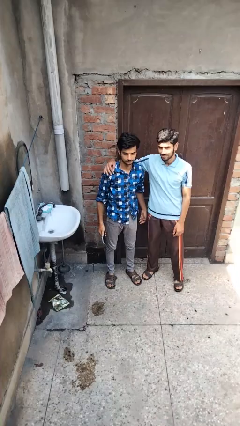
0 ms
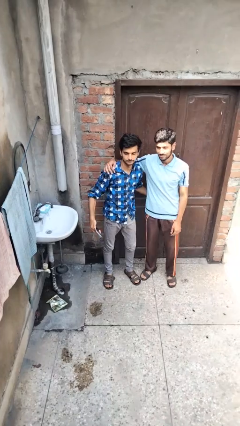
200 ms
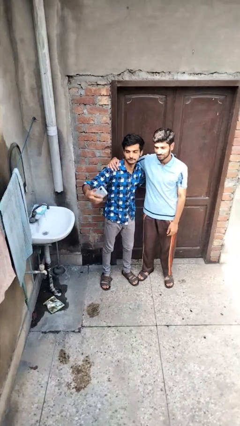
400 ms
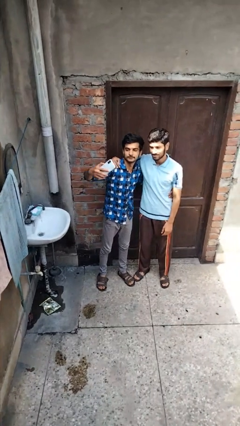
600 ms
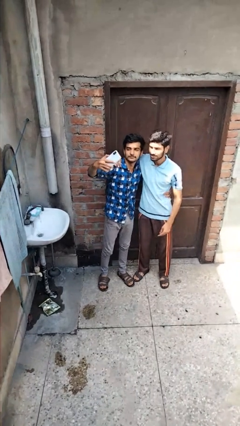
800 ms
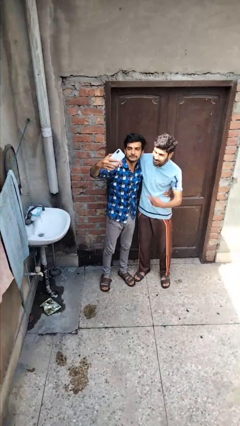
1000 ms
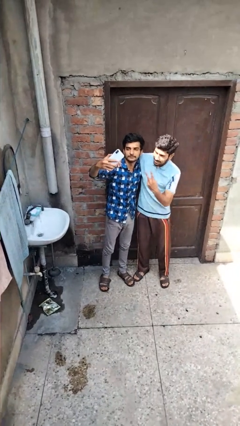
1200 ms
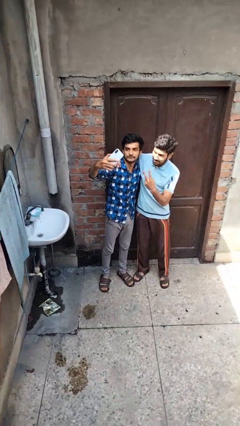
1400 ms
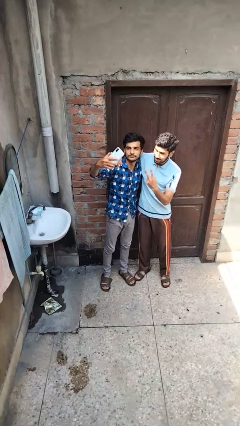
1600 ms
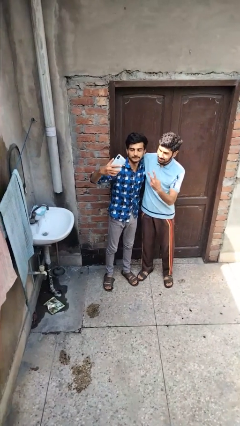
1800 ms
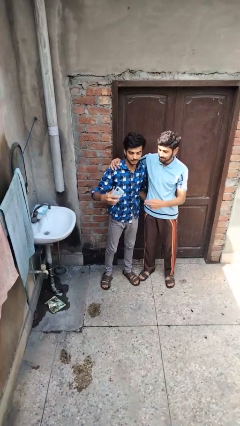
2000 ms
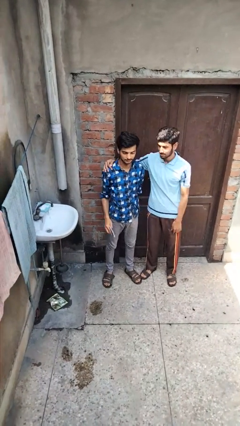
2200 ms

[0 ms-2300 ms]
person takes selfie with person

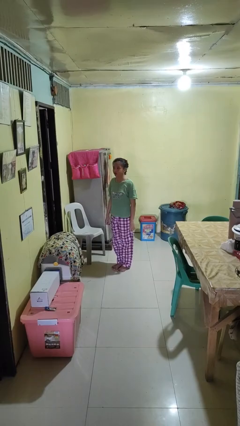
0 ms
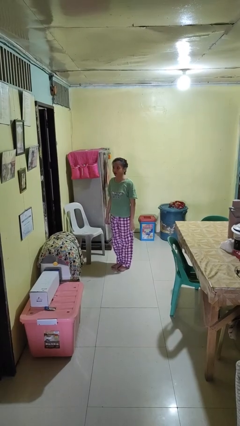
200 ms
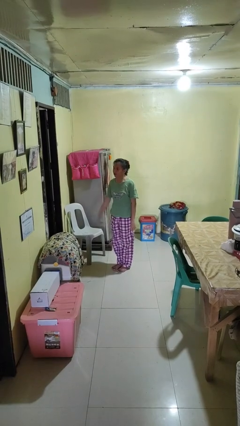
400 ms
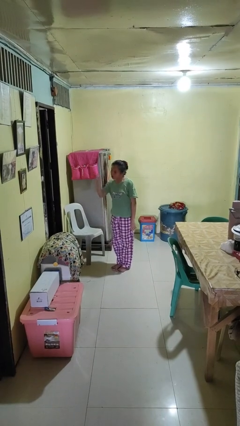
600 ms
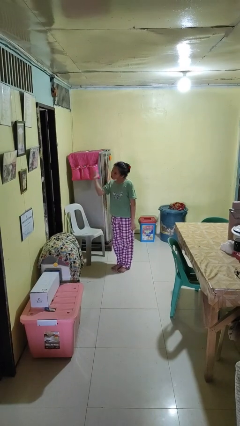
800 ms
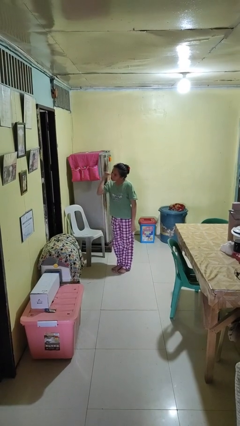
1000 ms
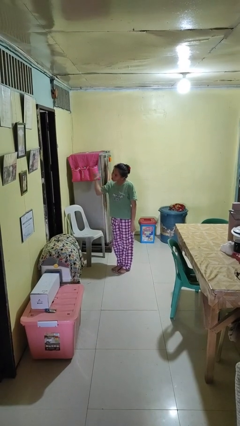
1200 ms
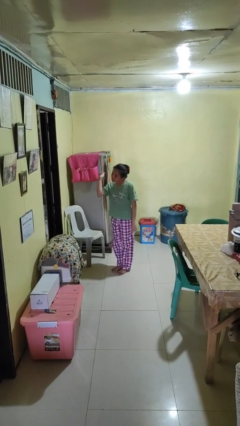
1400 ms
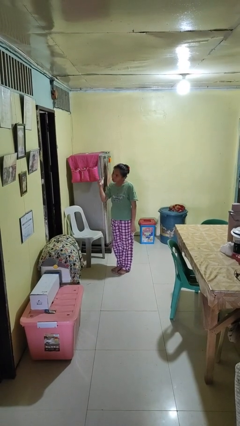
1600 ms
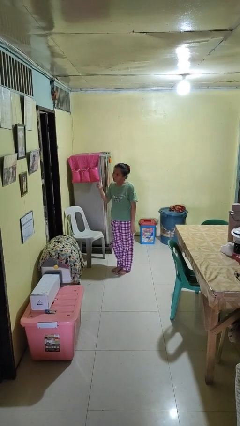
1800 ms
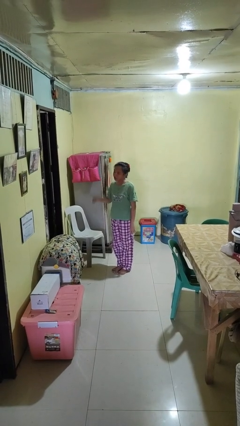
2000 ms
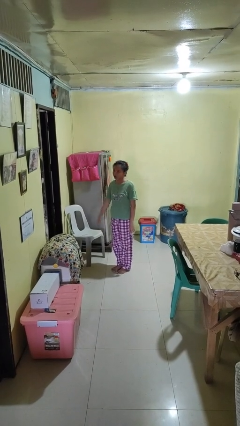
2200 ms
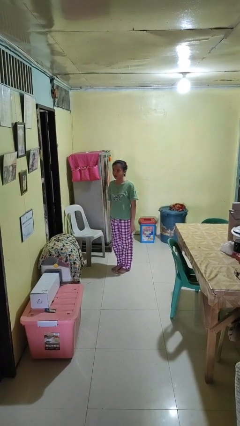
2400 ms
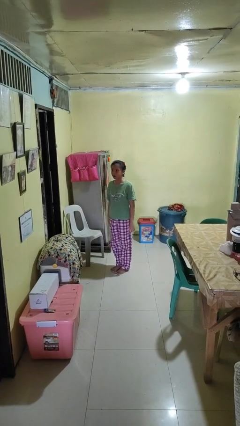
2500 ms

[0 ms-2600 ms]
person gestures behind me

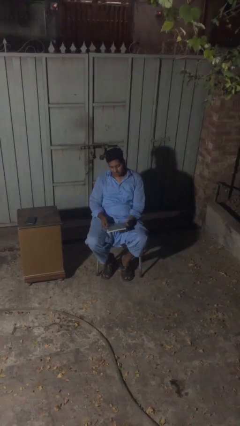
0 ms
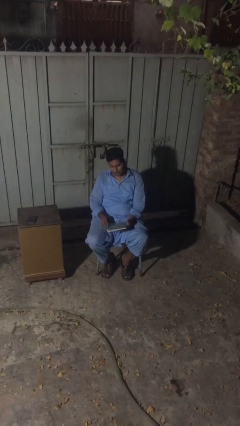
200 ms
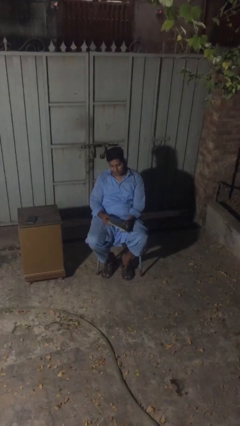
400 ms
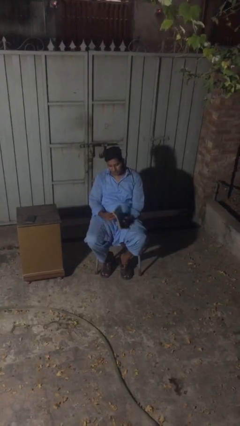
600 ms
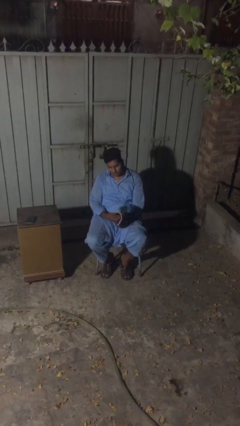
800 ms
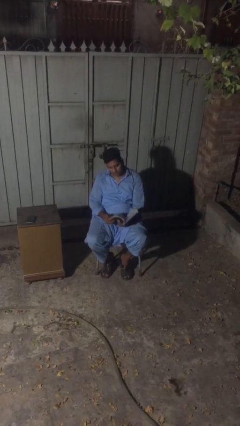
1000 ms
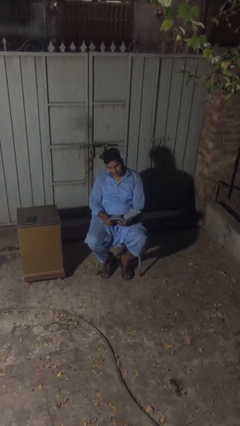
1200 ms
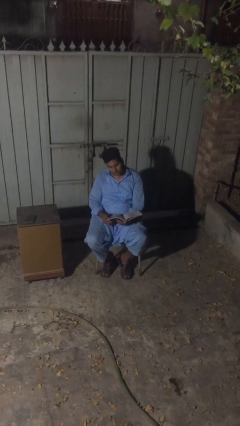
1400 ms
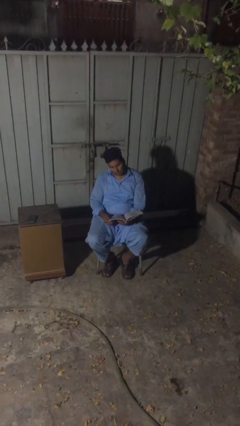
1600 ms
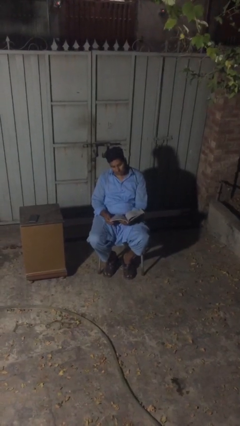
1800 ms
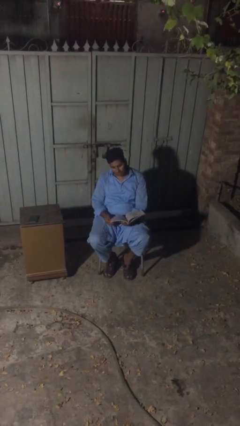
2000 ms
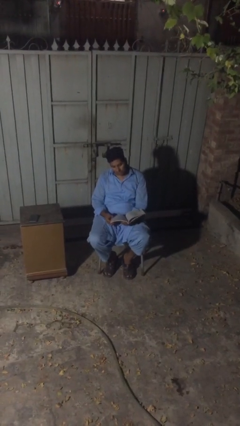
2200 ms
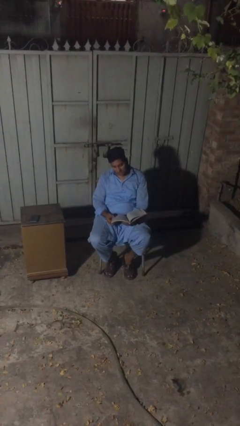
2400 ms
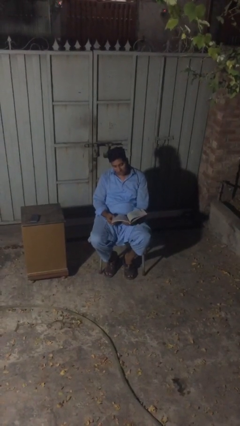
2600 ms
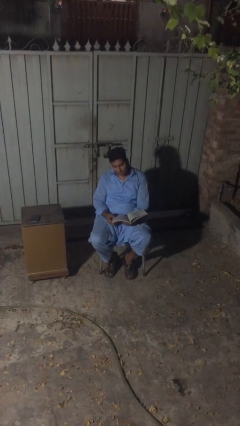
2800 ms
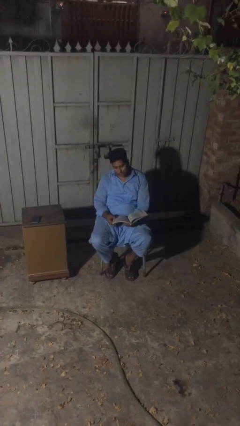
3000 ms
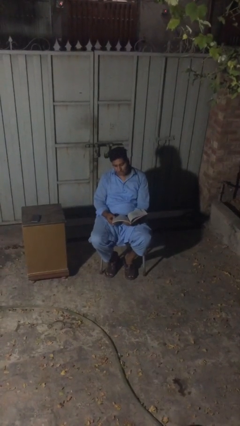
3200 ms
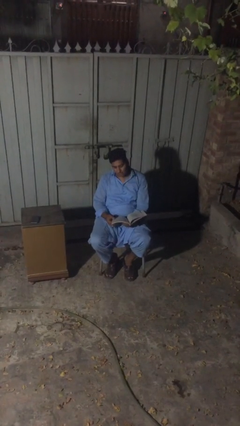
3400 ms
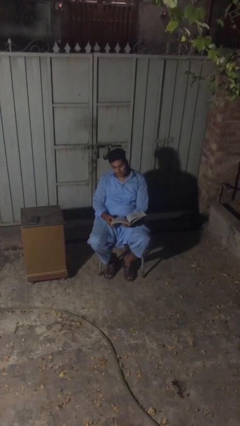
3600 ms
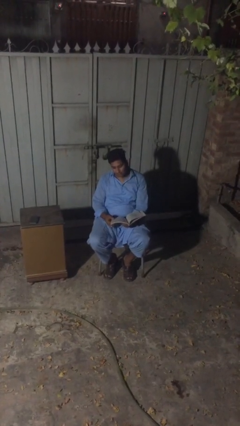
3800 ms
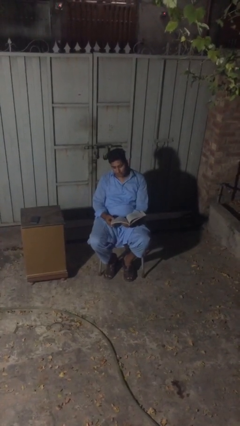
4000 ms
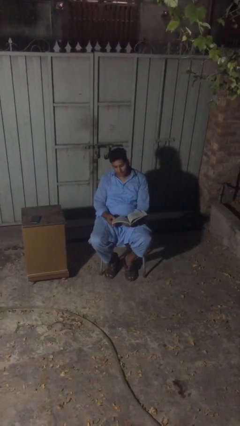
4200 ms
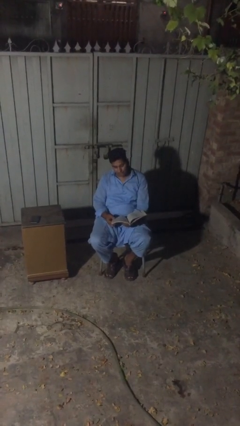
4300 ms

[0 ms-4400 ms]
person reads document

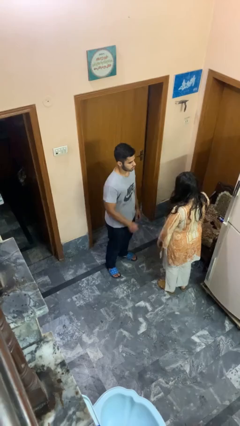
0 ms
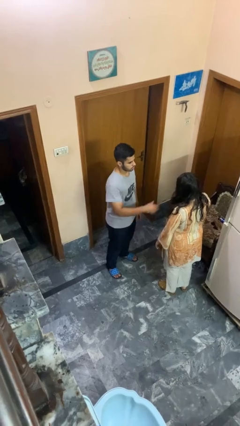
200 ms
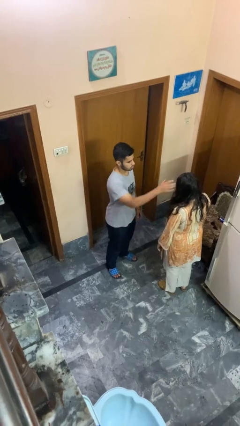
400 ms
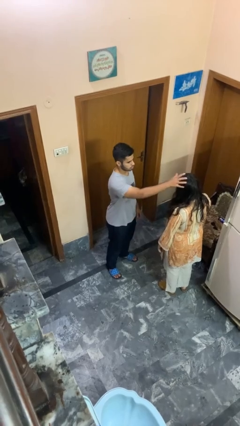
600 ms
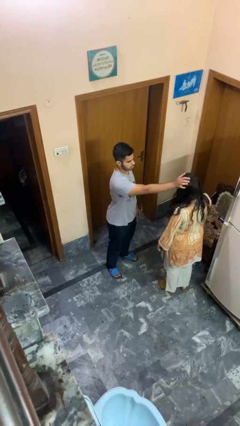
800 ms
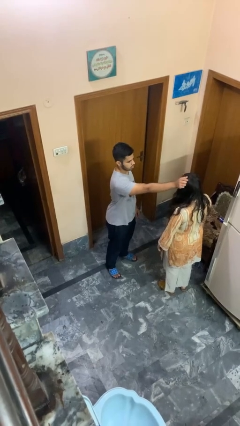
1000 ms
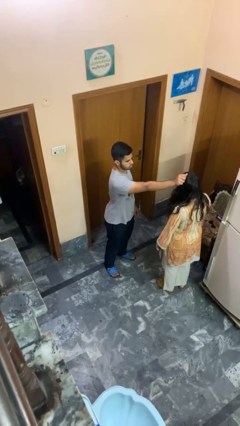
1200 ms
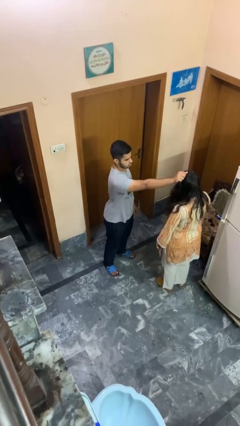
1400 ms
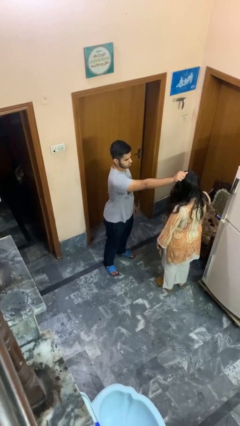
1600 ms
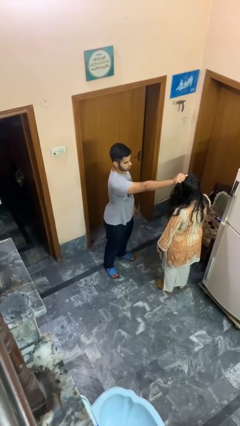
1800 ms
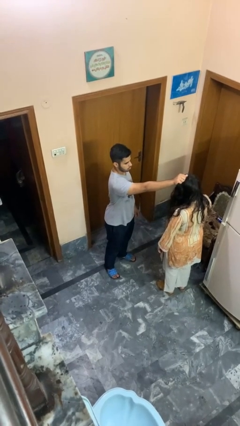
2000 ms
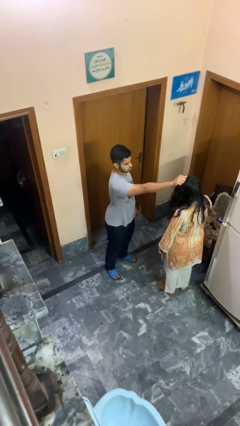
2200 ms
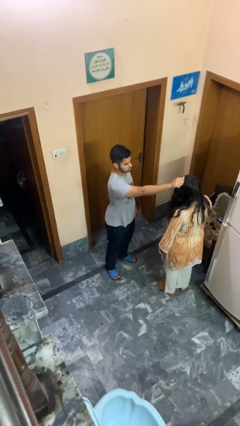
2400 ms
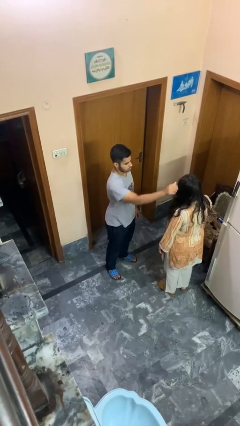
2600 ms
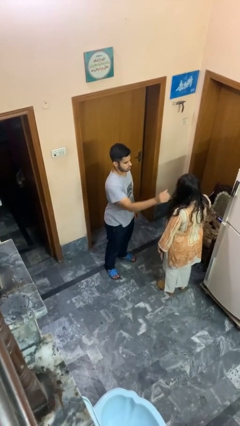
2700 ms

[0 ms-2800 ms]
person grabs person by hair

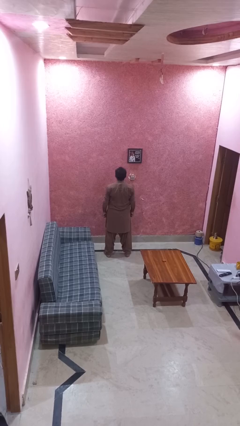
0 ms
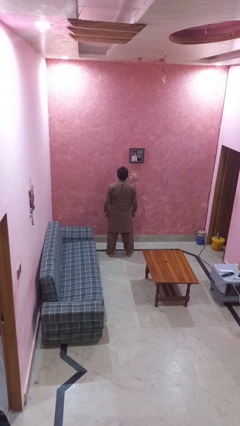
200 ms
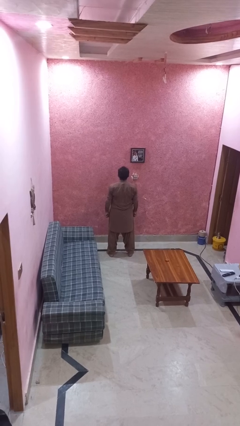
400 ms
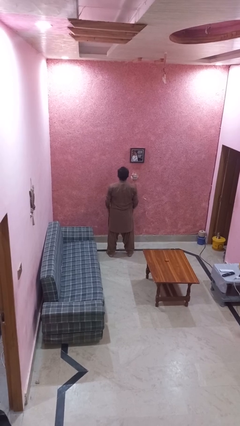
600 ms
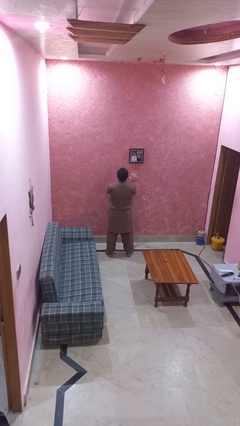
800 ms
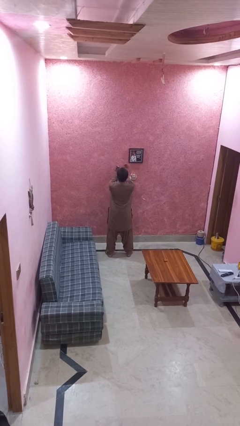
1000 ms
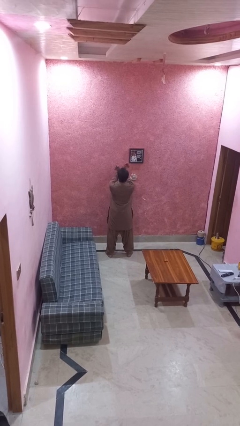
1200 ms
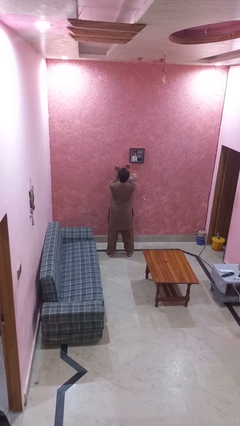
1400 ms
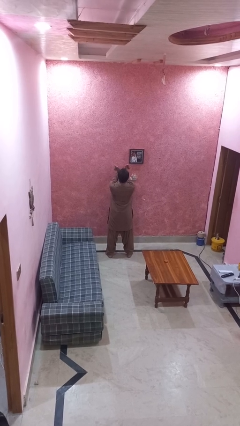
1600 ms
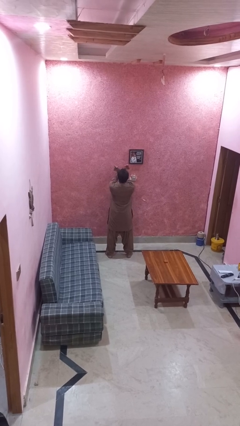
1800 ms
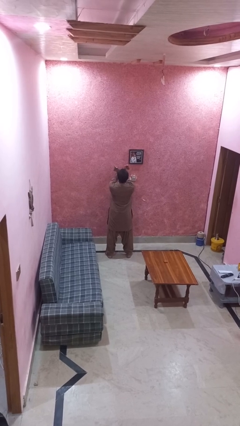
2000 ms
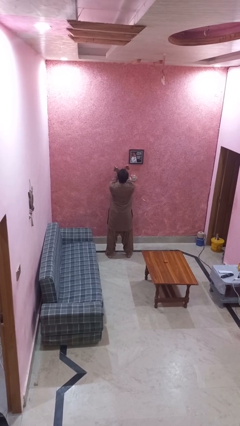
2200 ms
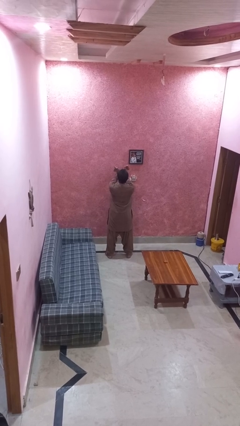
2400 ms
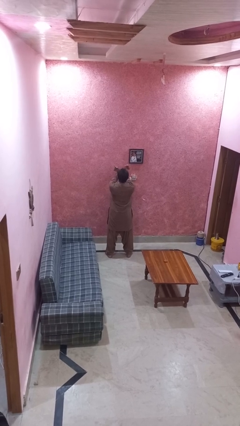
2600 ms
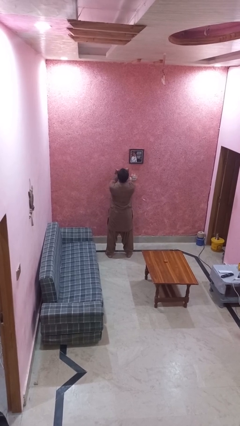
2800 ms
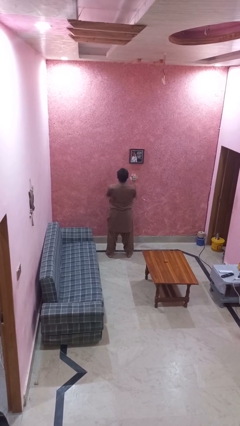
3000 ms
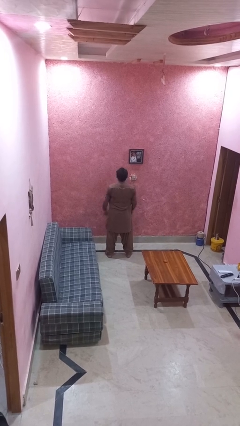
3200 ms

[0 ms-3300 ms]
person gestures arms x

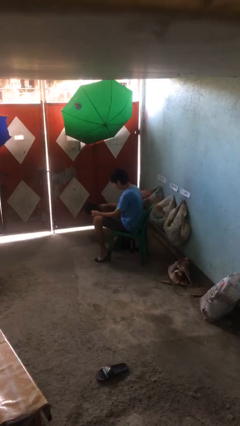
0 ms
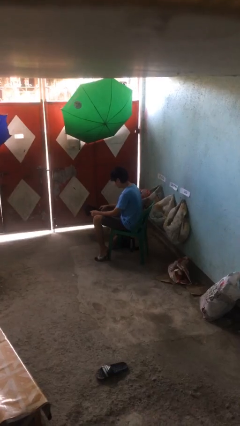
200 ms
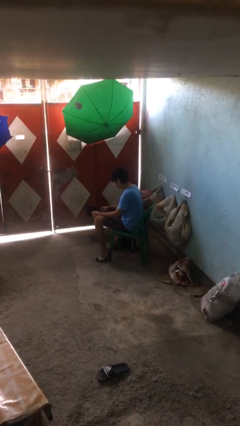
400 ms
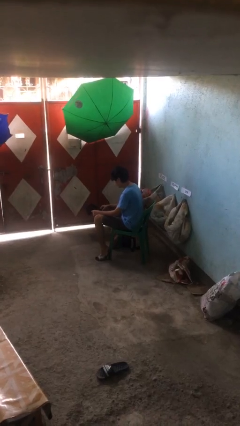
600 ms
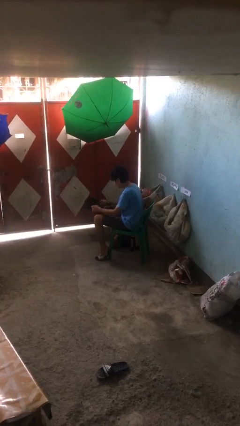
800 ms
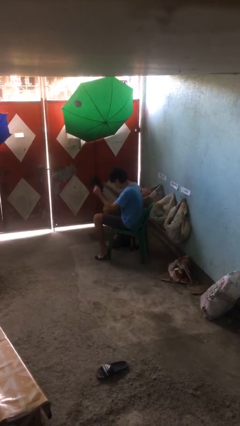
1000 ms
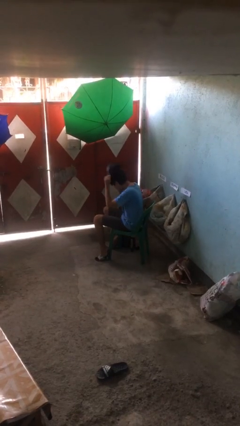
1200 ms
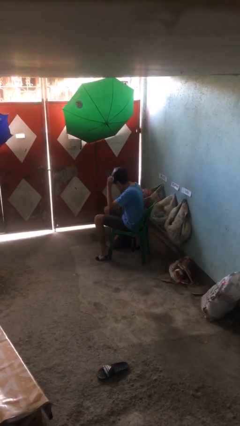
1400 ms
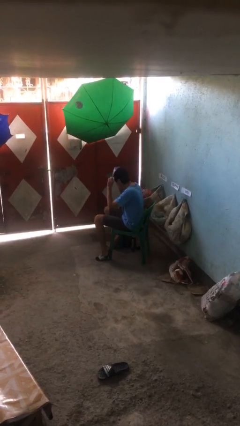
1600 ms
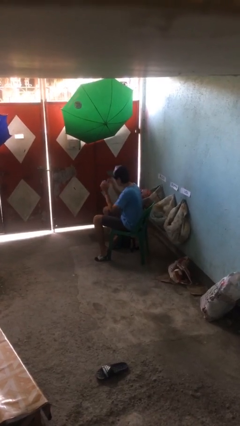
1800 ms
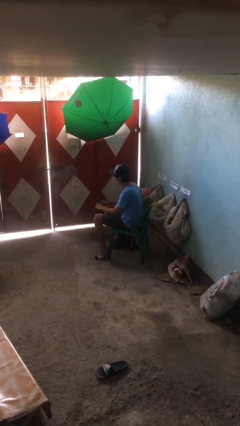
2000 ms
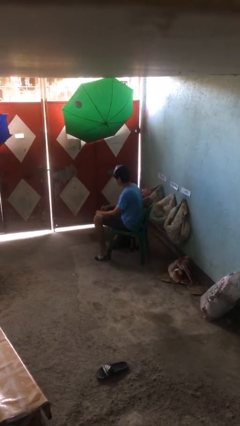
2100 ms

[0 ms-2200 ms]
person puts on hat

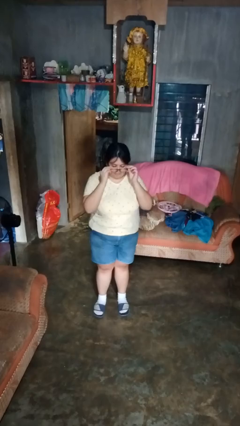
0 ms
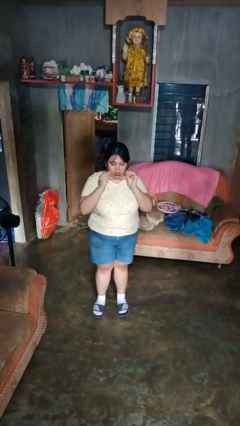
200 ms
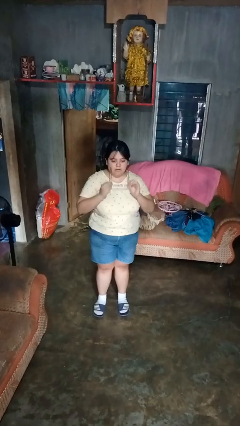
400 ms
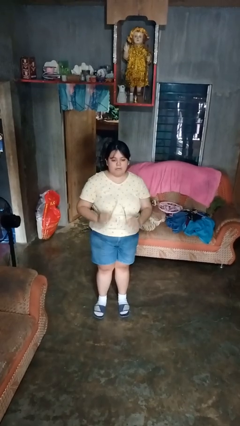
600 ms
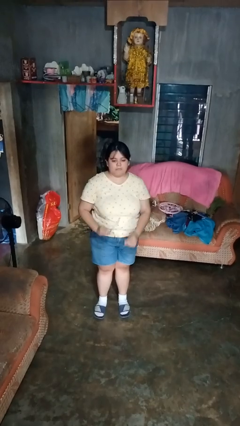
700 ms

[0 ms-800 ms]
person takes off glasses
